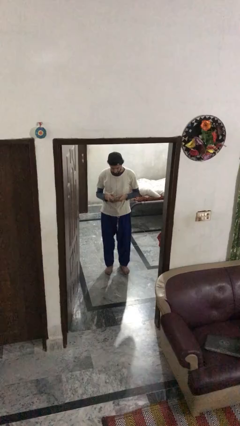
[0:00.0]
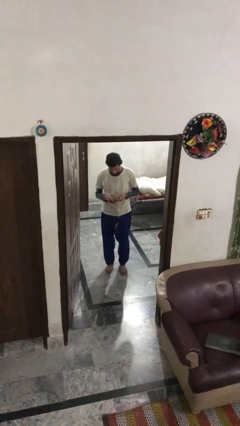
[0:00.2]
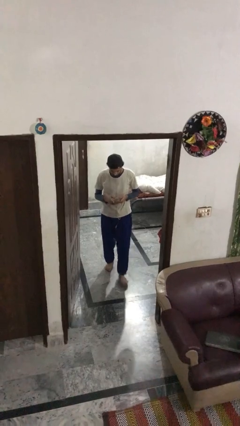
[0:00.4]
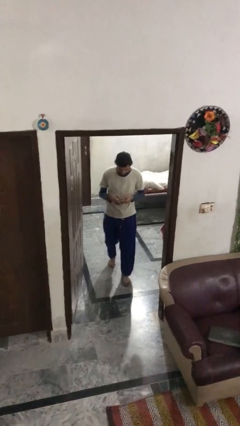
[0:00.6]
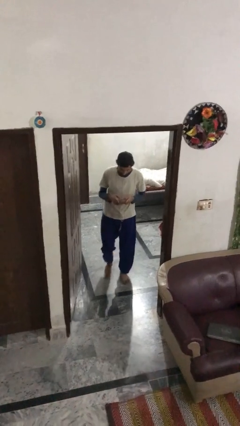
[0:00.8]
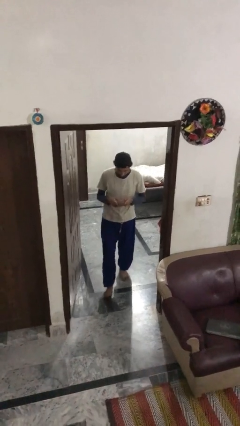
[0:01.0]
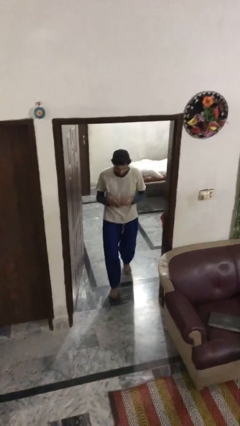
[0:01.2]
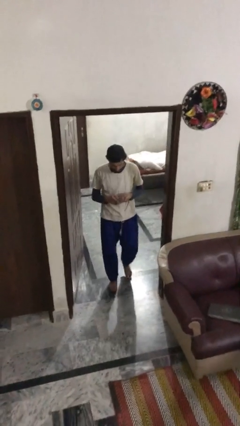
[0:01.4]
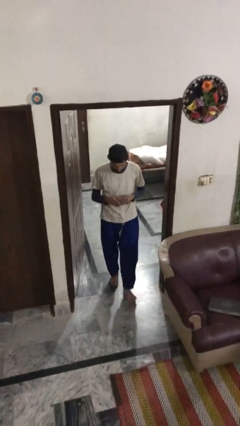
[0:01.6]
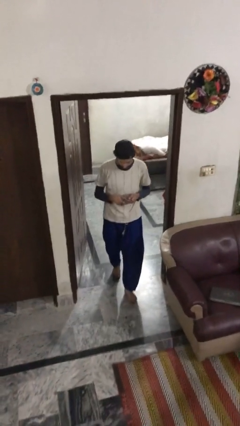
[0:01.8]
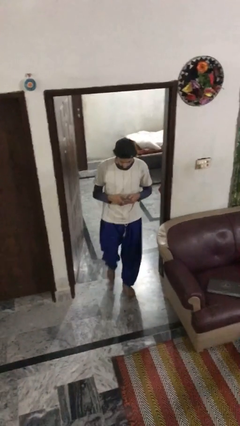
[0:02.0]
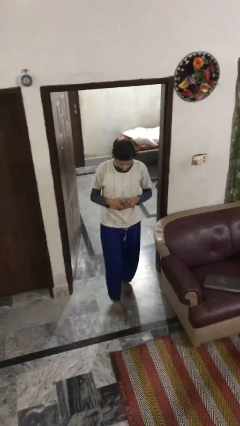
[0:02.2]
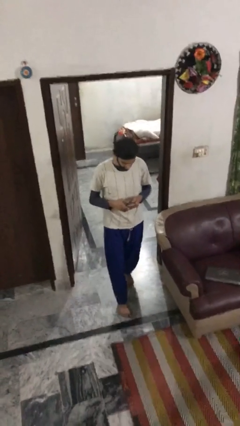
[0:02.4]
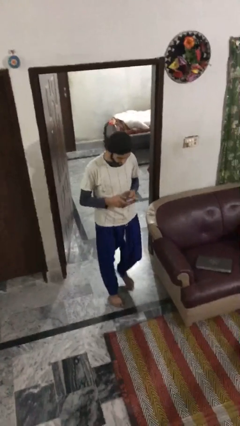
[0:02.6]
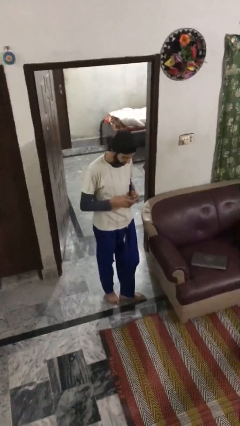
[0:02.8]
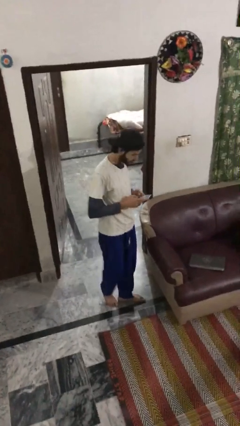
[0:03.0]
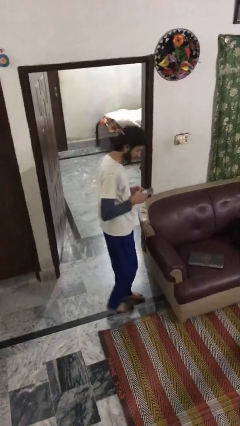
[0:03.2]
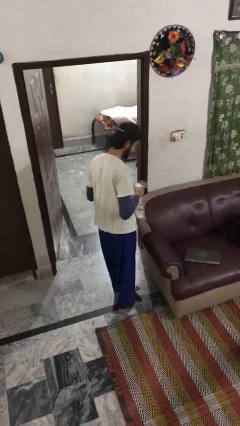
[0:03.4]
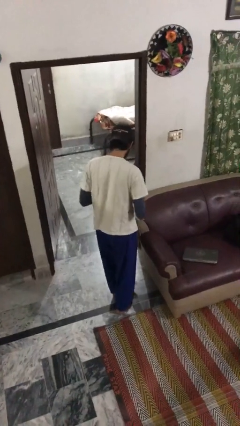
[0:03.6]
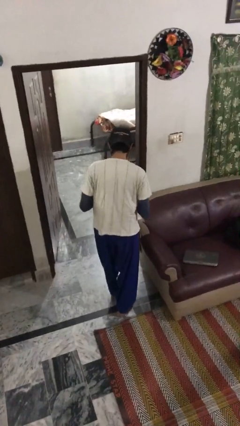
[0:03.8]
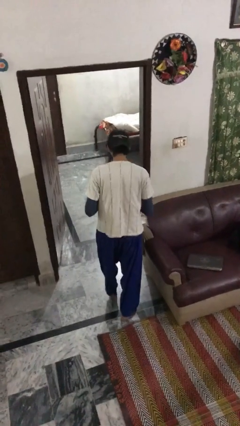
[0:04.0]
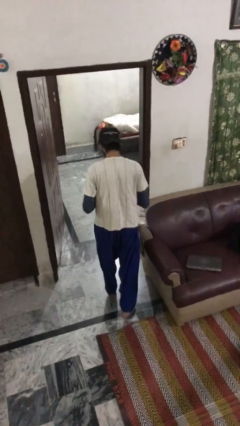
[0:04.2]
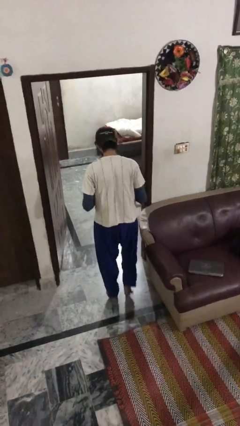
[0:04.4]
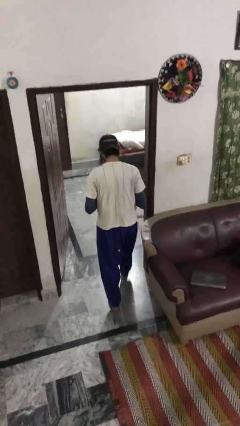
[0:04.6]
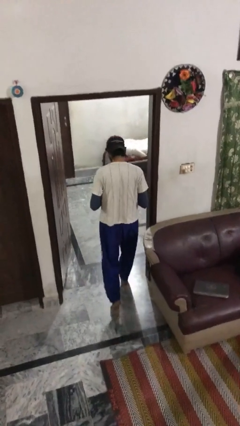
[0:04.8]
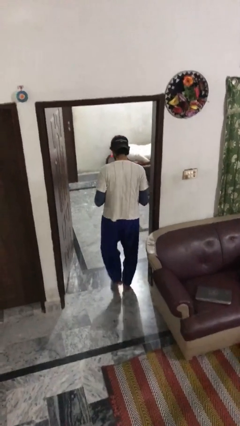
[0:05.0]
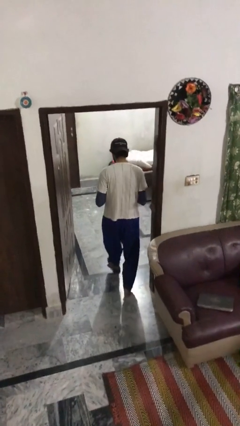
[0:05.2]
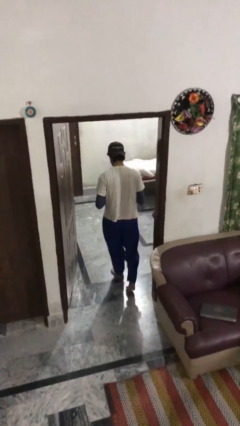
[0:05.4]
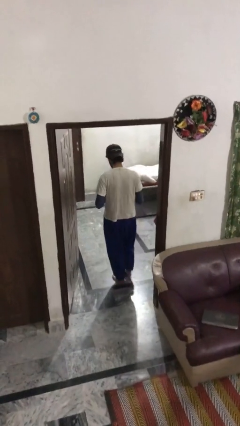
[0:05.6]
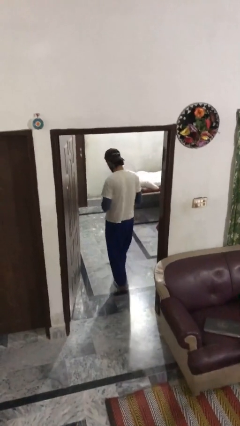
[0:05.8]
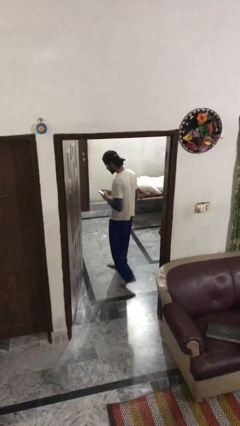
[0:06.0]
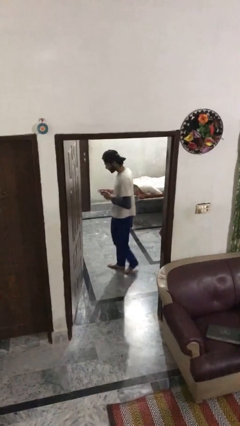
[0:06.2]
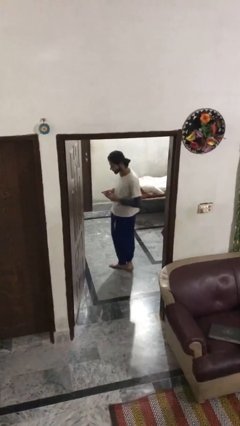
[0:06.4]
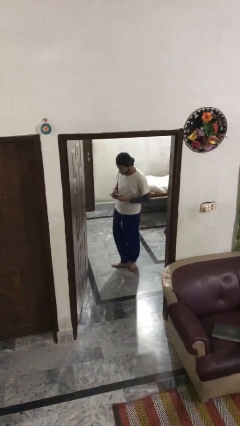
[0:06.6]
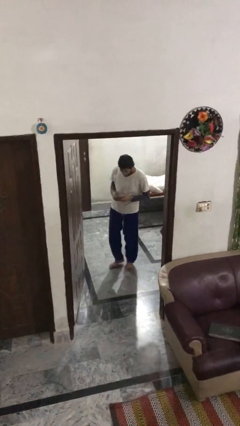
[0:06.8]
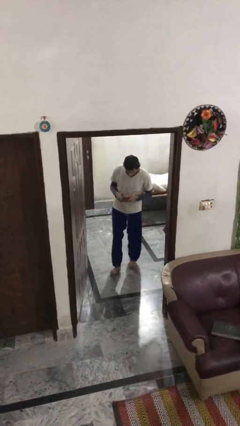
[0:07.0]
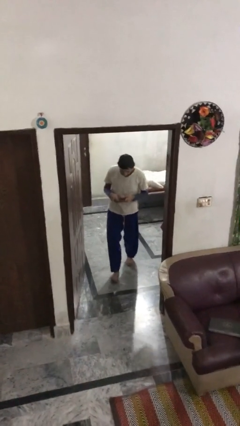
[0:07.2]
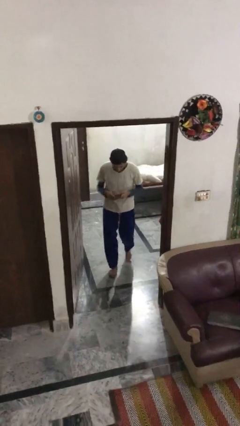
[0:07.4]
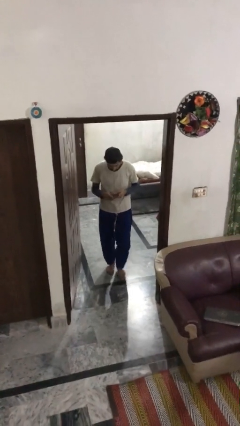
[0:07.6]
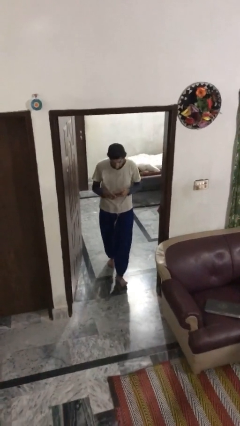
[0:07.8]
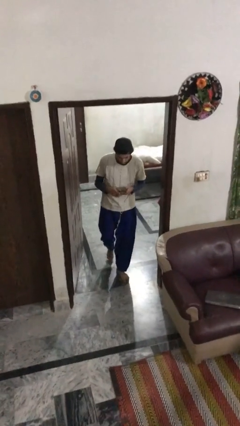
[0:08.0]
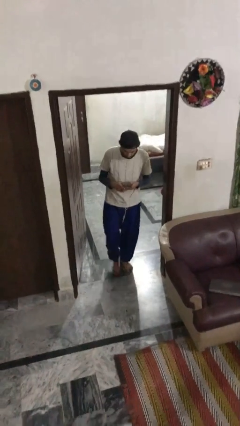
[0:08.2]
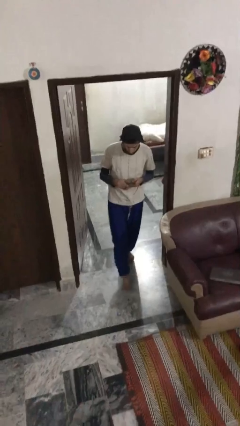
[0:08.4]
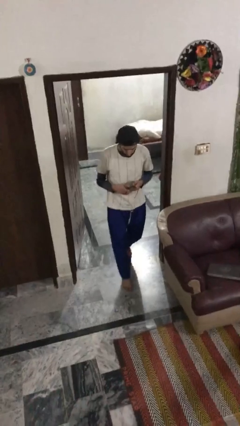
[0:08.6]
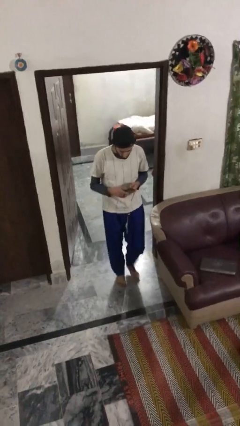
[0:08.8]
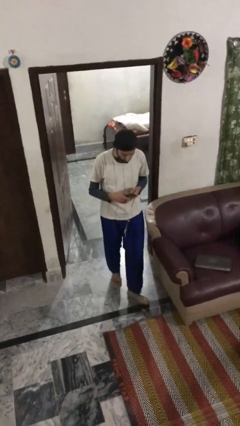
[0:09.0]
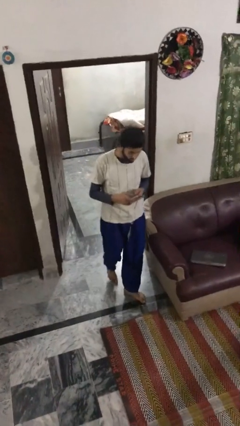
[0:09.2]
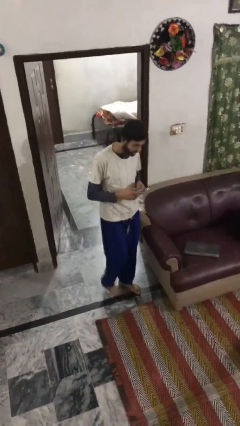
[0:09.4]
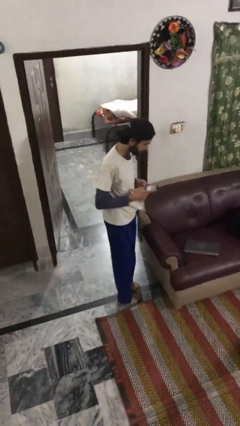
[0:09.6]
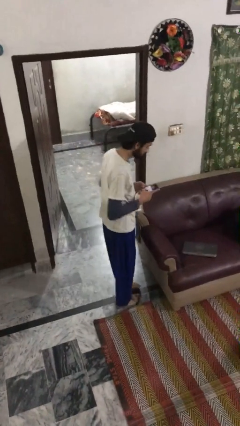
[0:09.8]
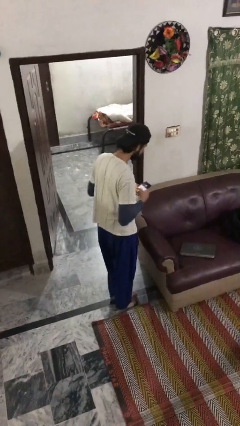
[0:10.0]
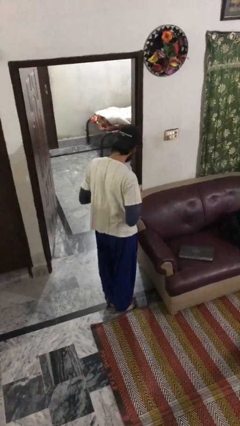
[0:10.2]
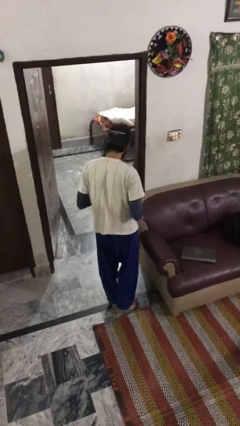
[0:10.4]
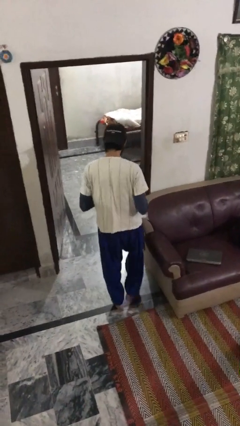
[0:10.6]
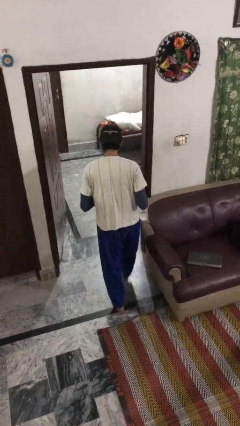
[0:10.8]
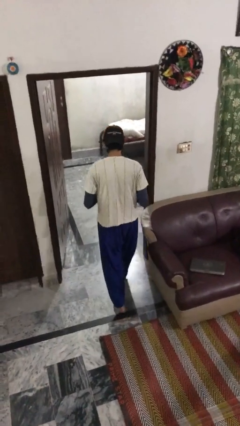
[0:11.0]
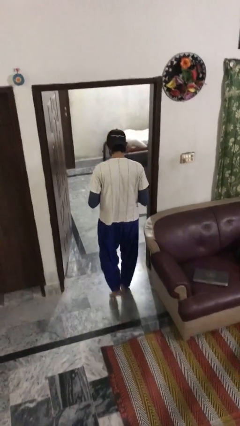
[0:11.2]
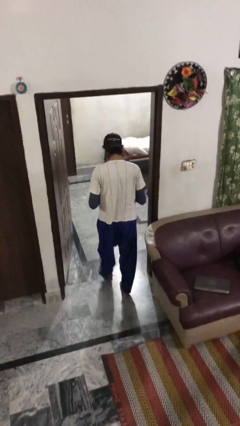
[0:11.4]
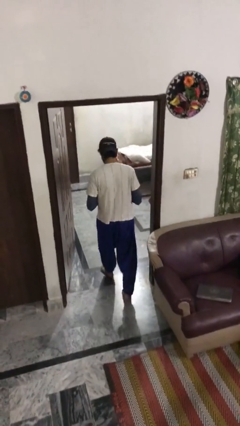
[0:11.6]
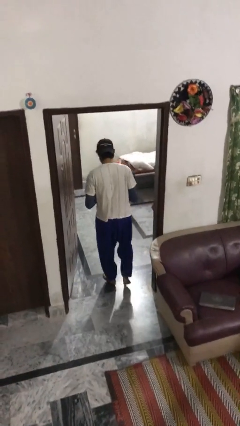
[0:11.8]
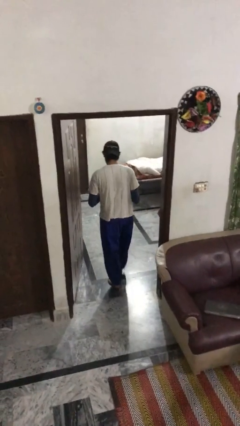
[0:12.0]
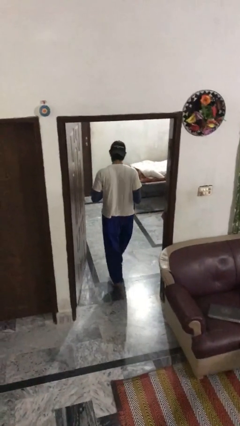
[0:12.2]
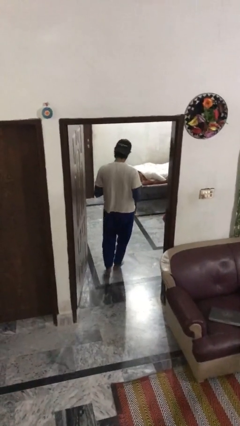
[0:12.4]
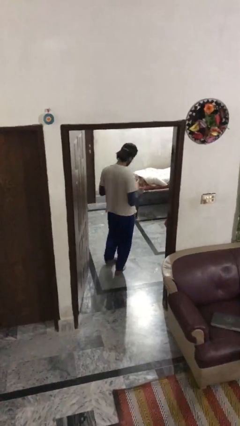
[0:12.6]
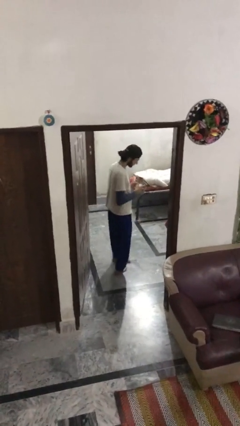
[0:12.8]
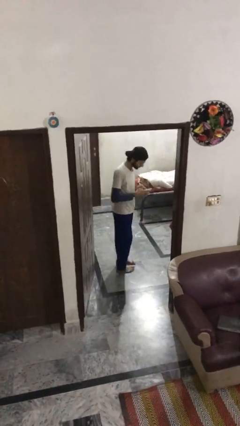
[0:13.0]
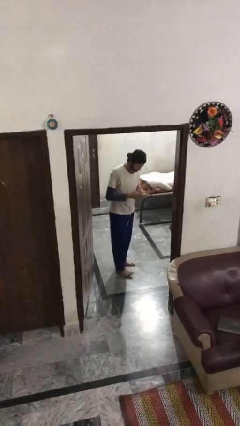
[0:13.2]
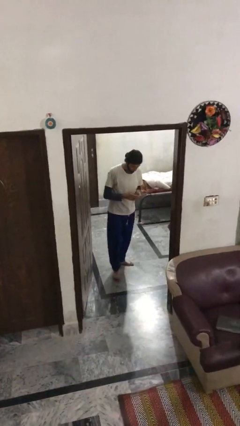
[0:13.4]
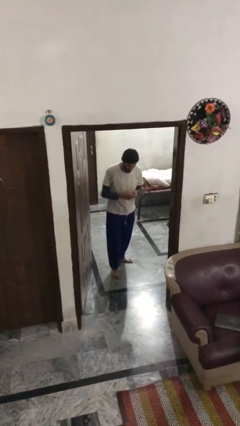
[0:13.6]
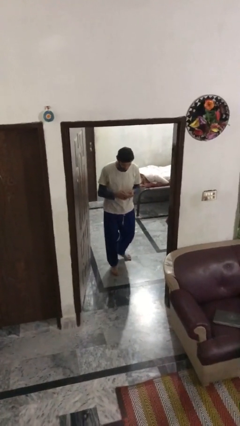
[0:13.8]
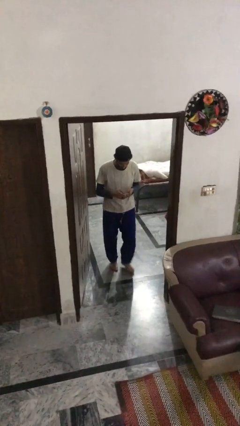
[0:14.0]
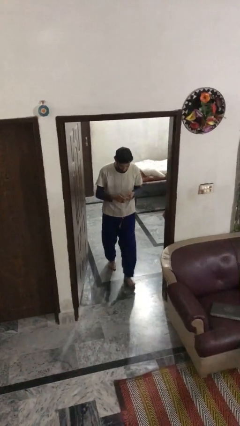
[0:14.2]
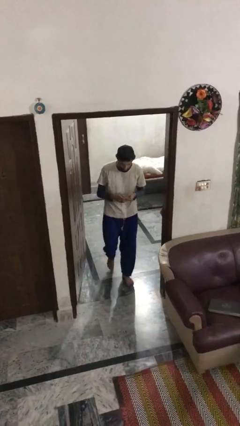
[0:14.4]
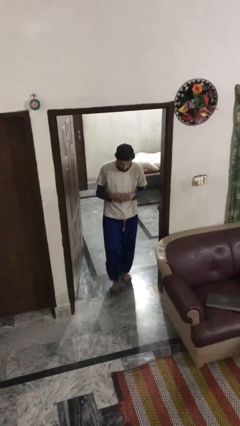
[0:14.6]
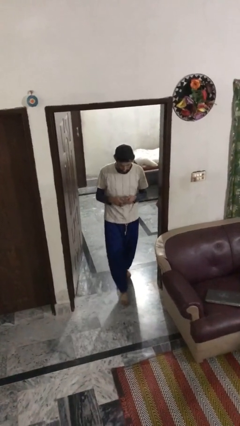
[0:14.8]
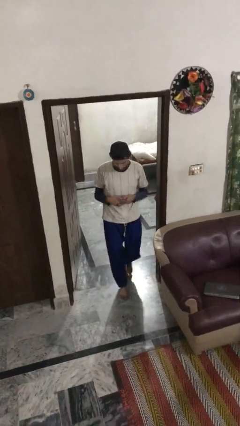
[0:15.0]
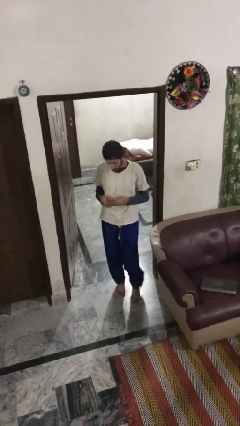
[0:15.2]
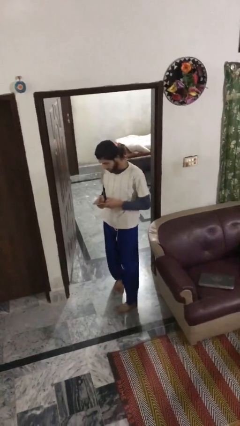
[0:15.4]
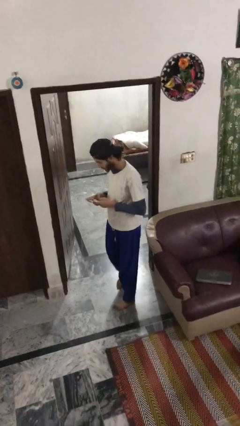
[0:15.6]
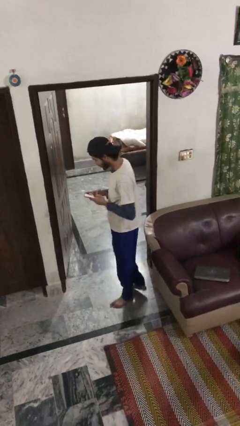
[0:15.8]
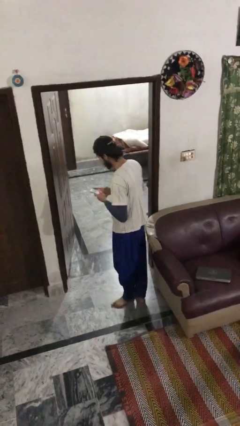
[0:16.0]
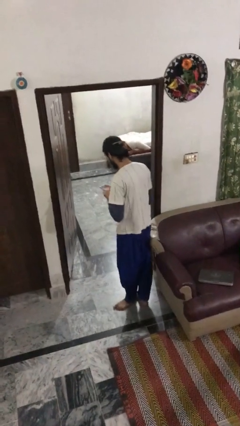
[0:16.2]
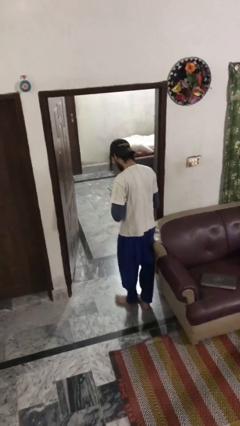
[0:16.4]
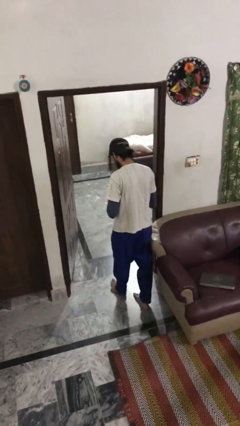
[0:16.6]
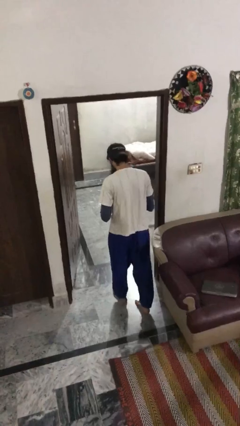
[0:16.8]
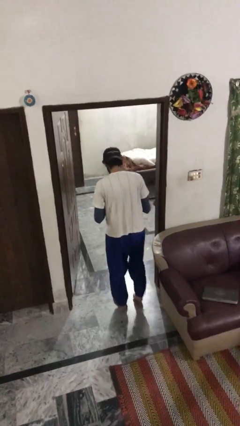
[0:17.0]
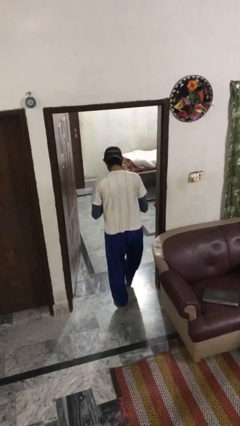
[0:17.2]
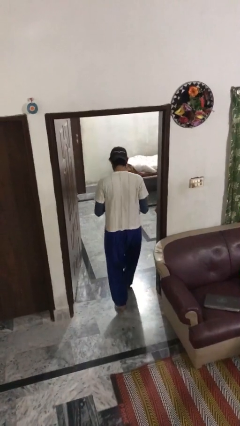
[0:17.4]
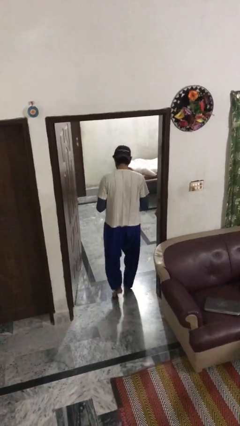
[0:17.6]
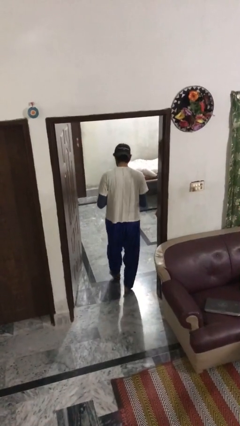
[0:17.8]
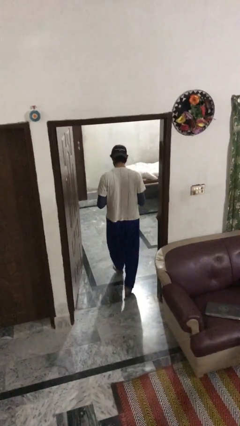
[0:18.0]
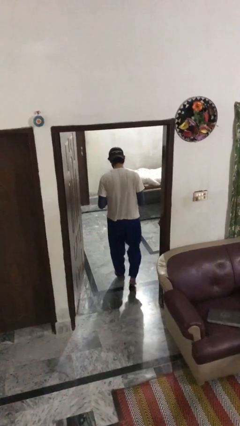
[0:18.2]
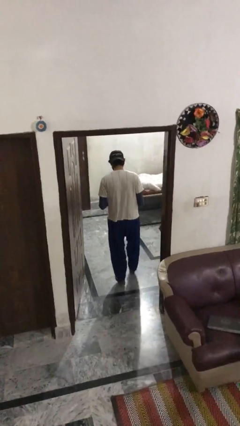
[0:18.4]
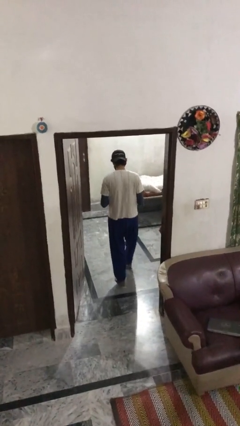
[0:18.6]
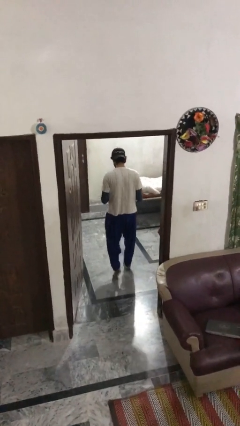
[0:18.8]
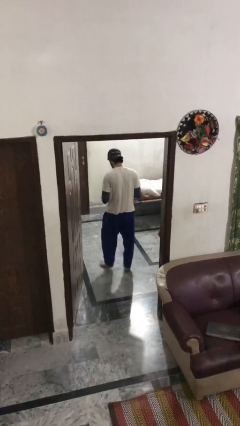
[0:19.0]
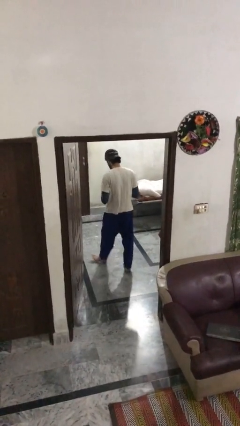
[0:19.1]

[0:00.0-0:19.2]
person texts on phone
